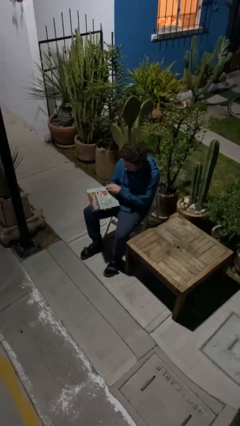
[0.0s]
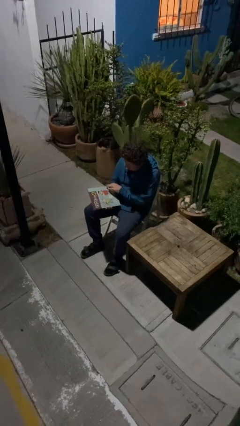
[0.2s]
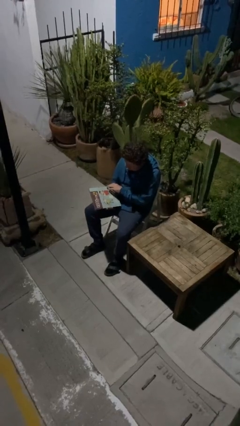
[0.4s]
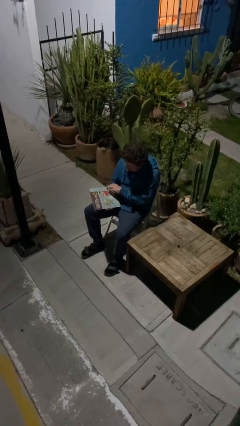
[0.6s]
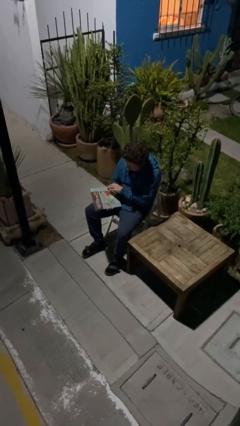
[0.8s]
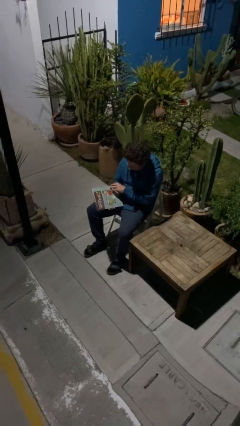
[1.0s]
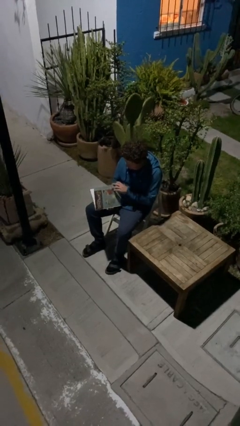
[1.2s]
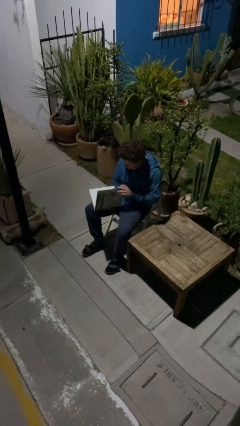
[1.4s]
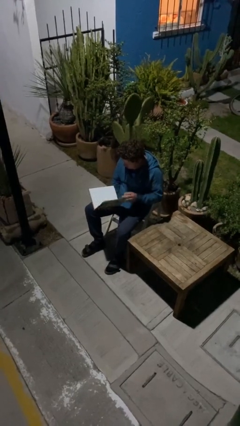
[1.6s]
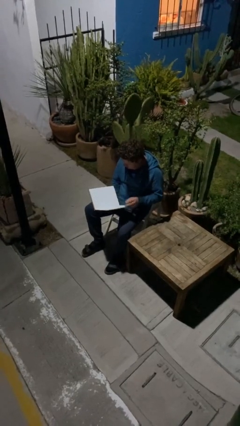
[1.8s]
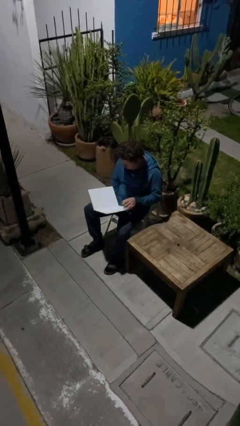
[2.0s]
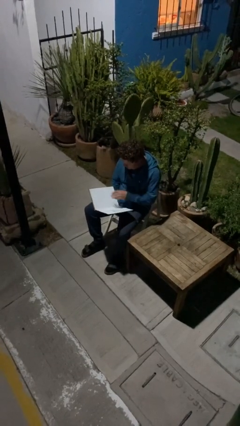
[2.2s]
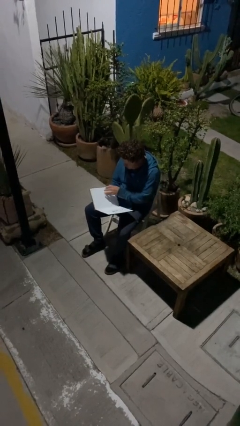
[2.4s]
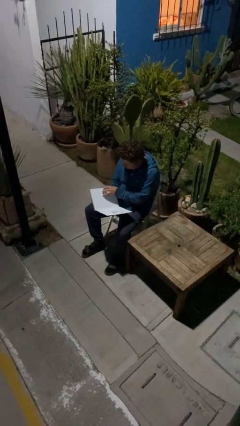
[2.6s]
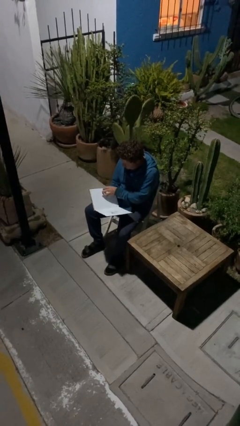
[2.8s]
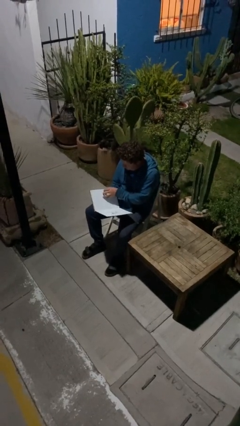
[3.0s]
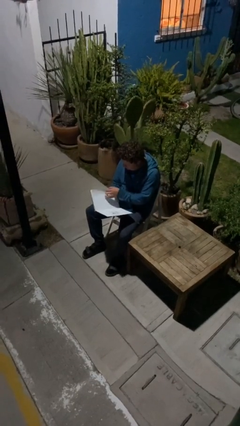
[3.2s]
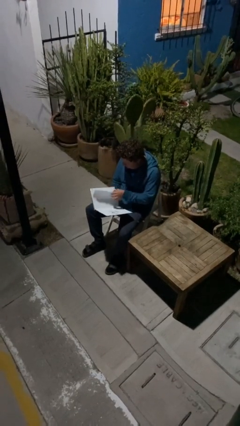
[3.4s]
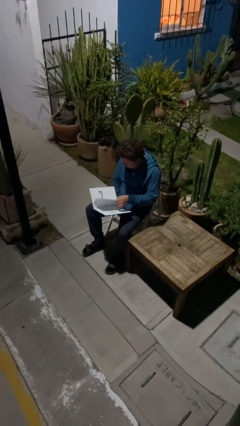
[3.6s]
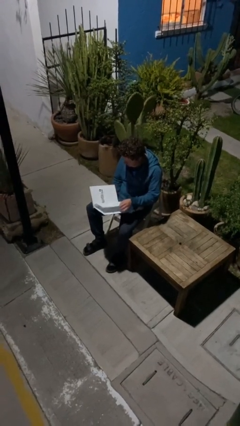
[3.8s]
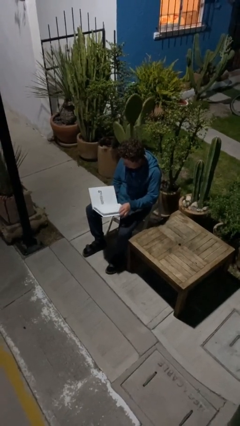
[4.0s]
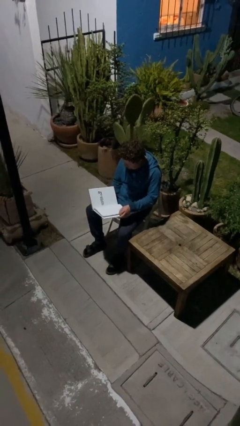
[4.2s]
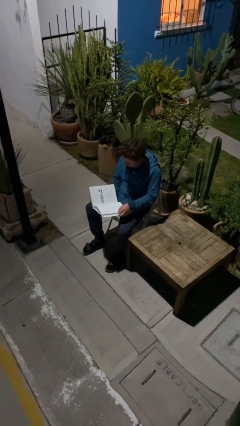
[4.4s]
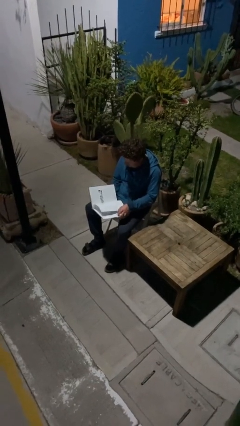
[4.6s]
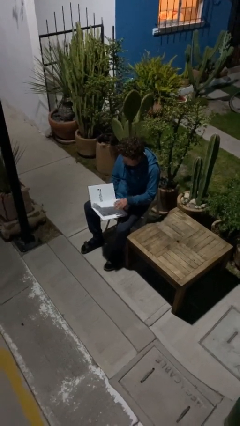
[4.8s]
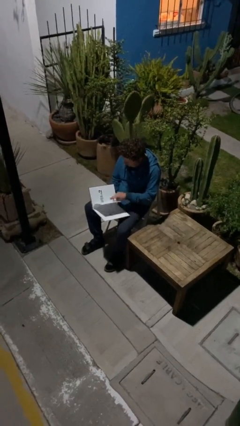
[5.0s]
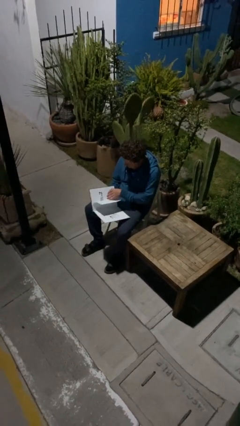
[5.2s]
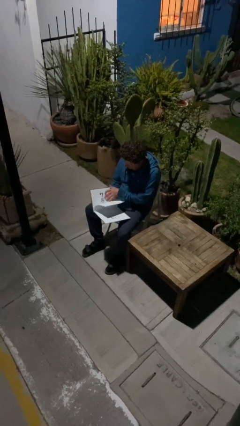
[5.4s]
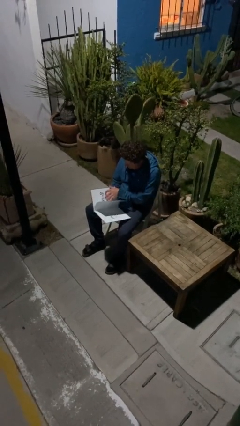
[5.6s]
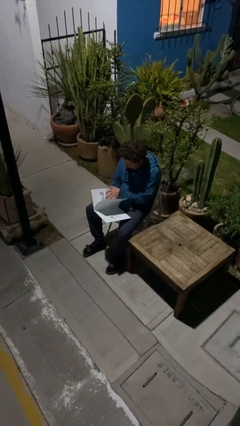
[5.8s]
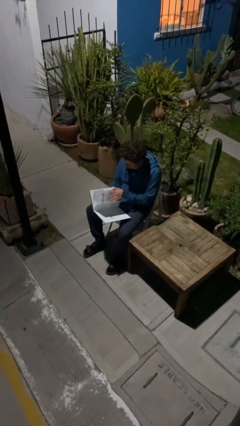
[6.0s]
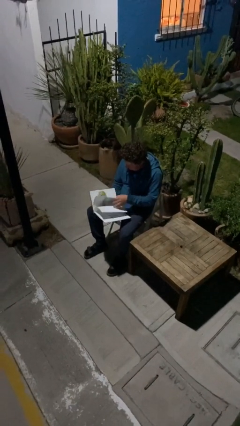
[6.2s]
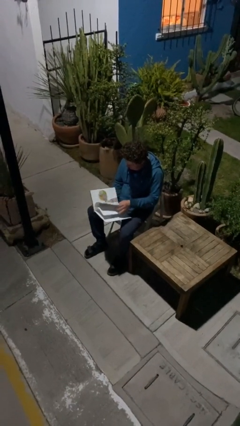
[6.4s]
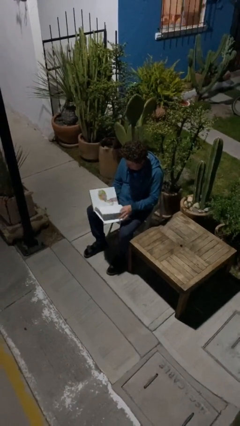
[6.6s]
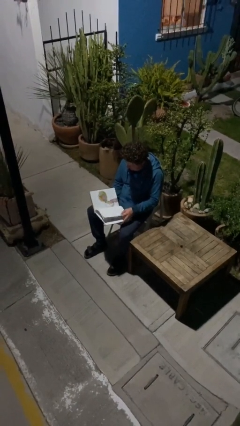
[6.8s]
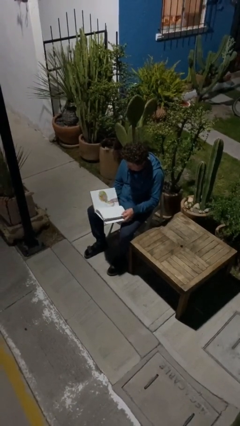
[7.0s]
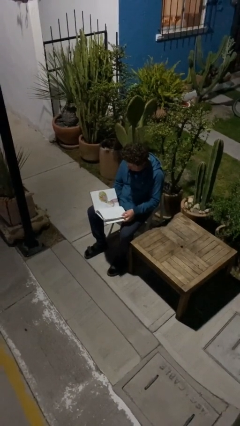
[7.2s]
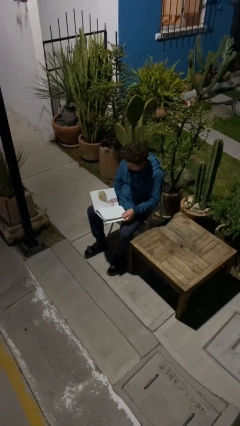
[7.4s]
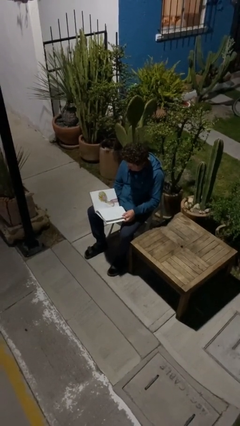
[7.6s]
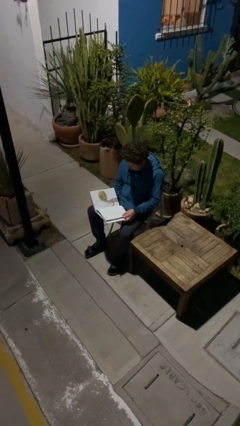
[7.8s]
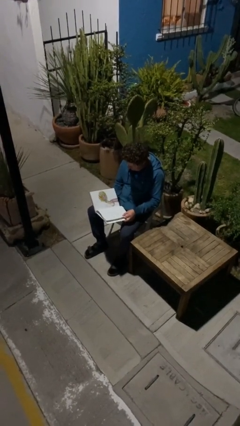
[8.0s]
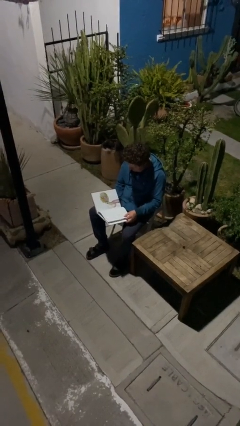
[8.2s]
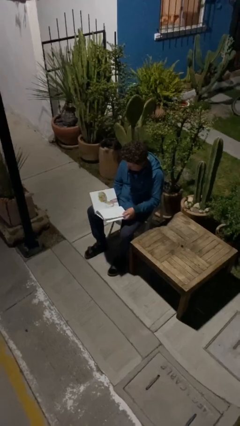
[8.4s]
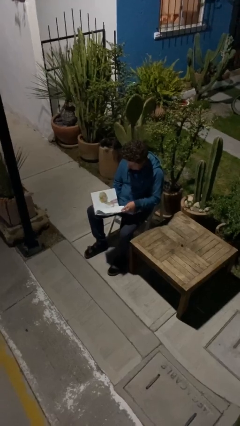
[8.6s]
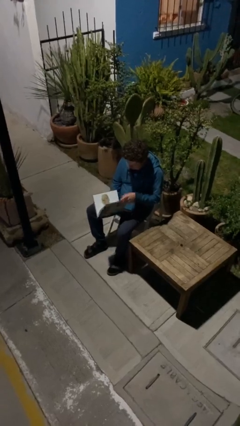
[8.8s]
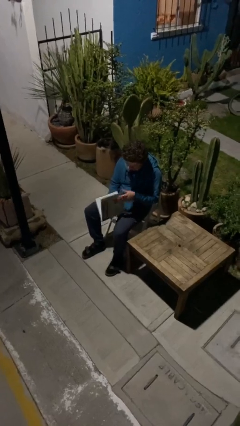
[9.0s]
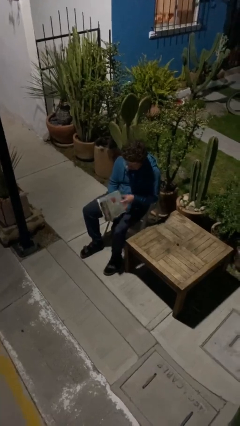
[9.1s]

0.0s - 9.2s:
person reads document

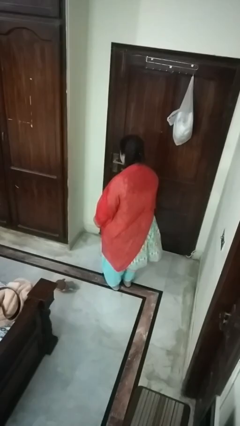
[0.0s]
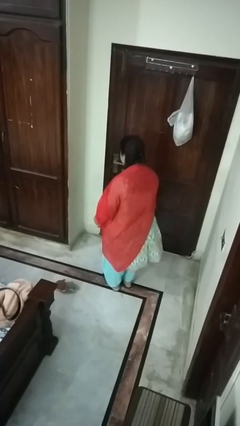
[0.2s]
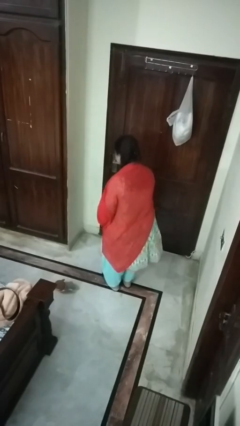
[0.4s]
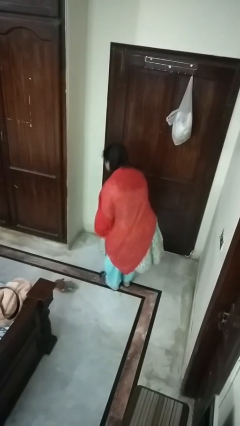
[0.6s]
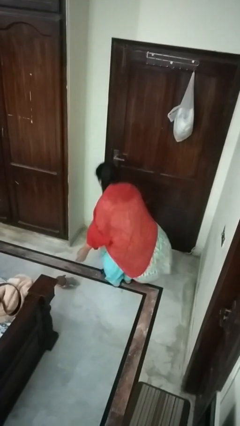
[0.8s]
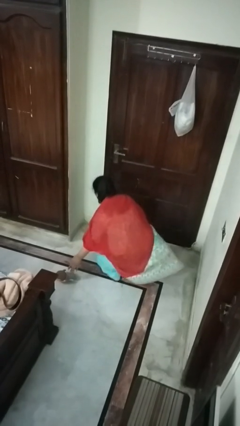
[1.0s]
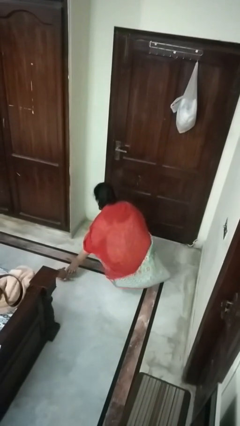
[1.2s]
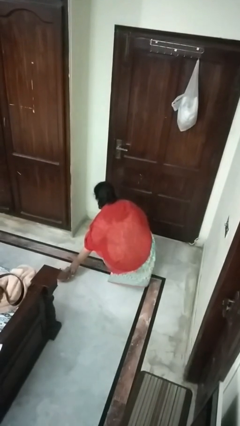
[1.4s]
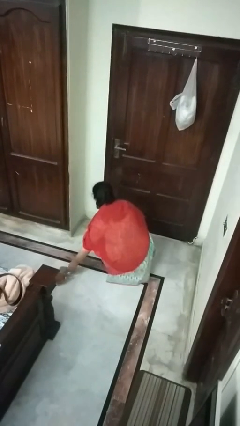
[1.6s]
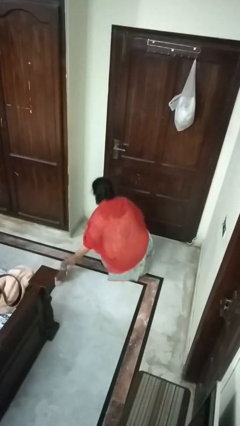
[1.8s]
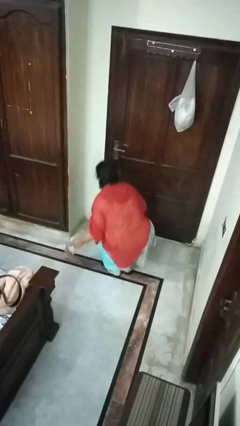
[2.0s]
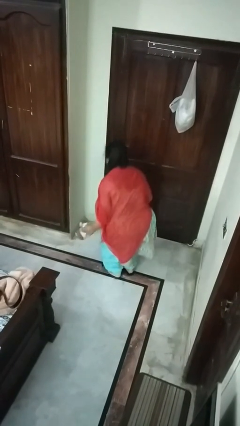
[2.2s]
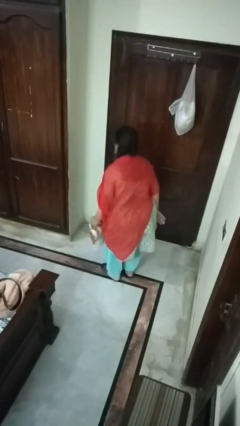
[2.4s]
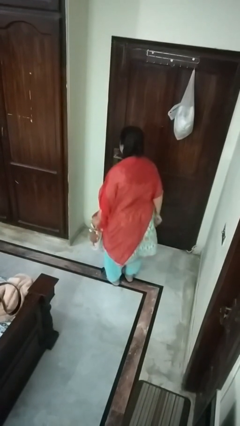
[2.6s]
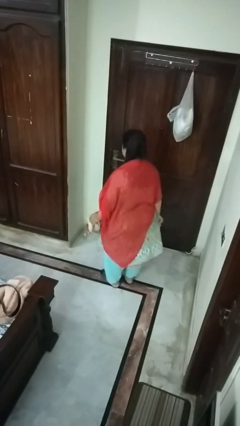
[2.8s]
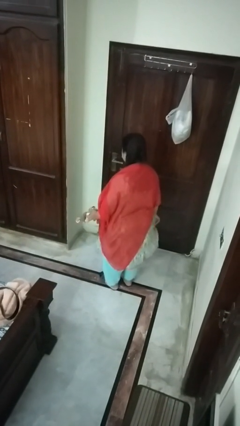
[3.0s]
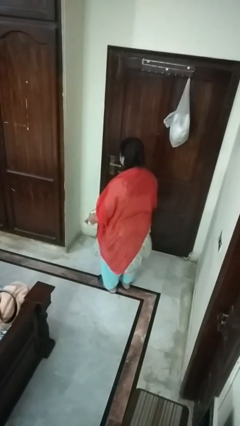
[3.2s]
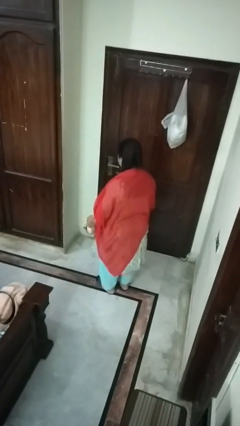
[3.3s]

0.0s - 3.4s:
person picks up object from floor

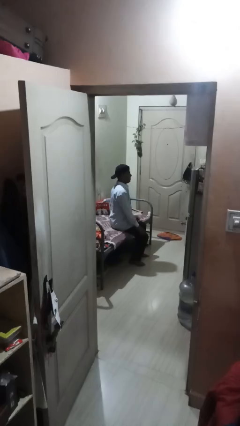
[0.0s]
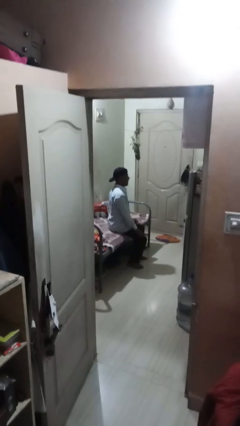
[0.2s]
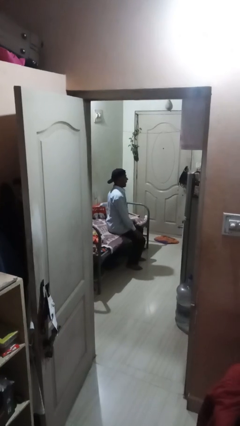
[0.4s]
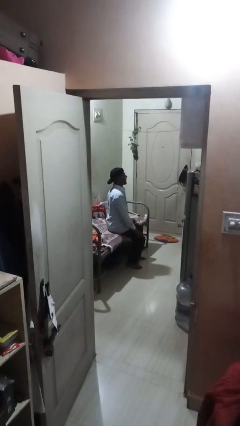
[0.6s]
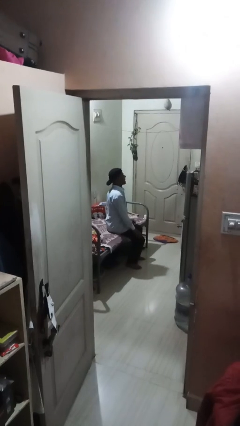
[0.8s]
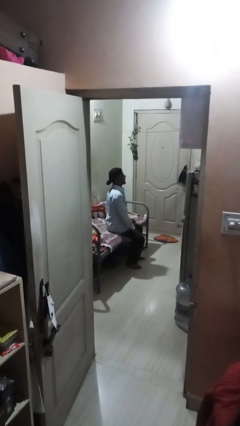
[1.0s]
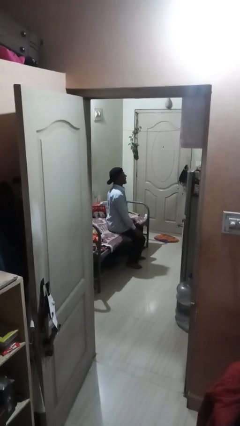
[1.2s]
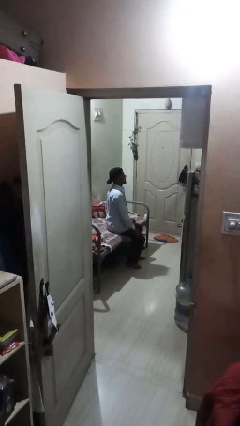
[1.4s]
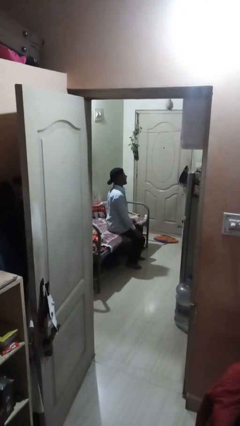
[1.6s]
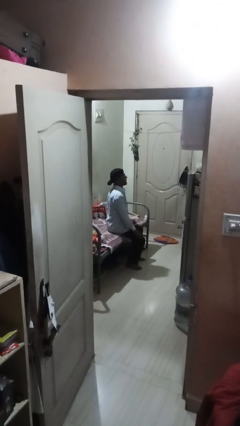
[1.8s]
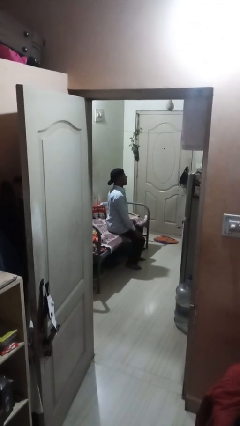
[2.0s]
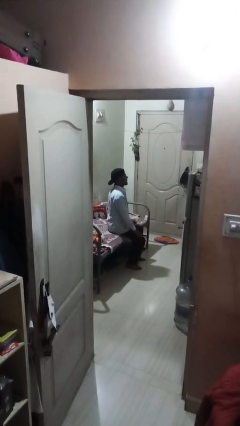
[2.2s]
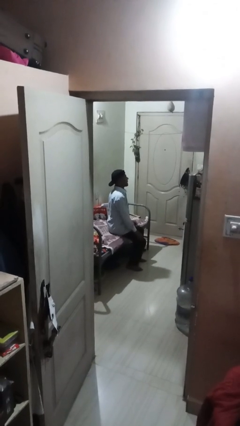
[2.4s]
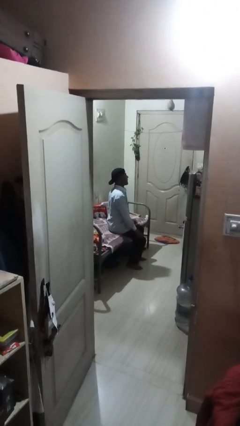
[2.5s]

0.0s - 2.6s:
person sticks out tongue

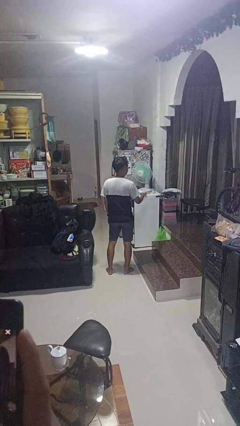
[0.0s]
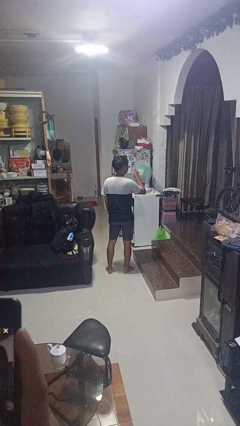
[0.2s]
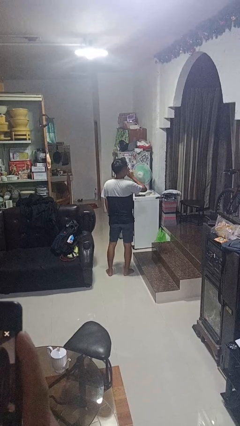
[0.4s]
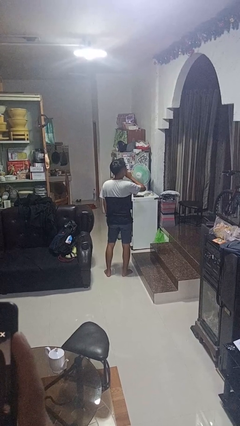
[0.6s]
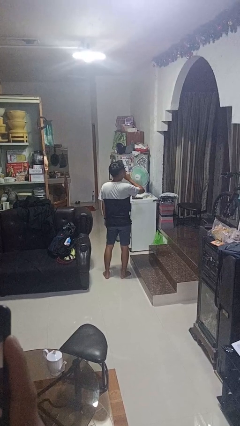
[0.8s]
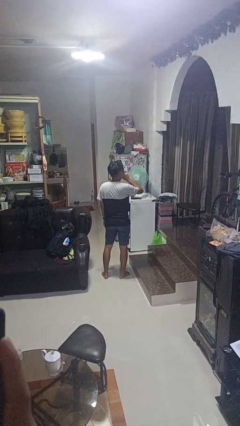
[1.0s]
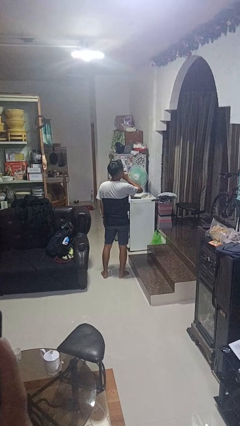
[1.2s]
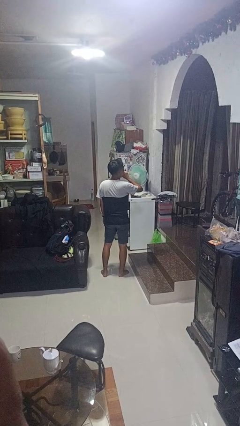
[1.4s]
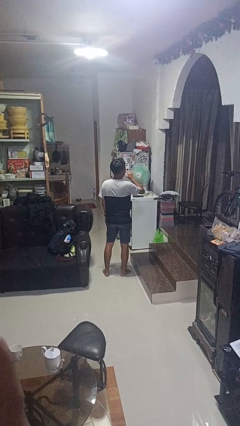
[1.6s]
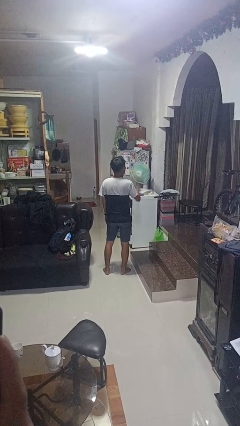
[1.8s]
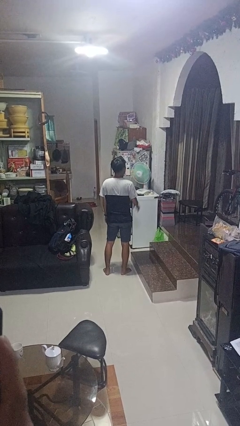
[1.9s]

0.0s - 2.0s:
person gestures be quiet

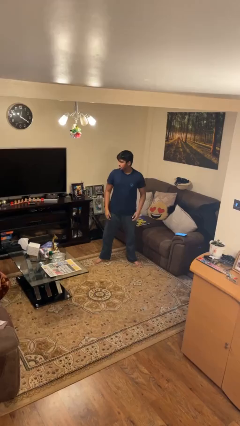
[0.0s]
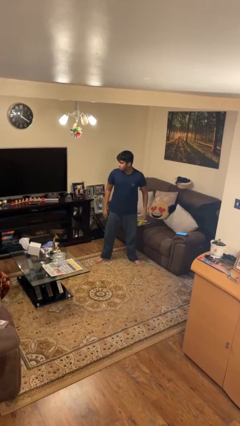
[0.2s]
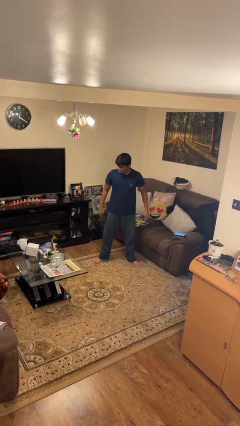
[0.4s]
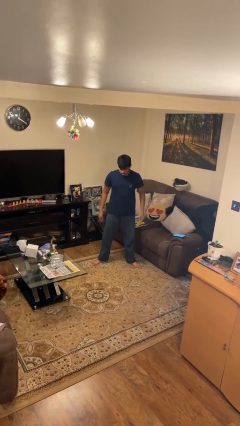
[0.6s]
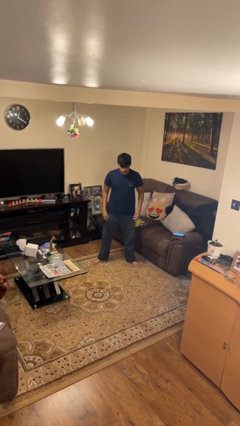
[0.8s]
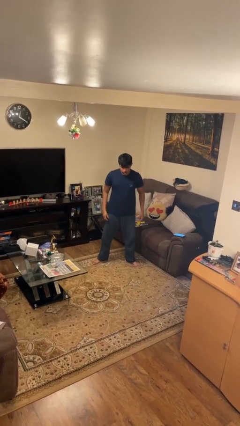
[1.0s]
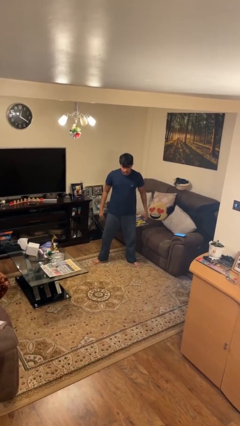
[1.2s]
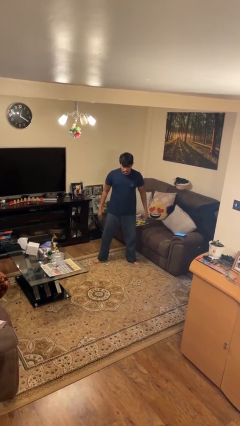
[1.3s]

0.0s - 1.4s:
person stands up
